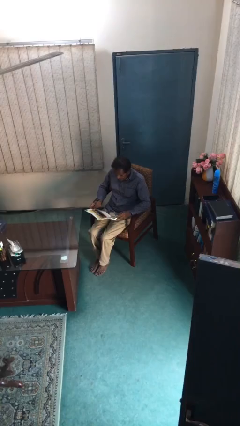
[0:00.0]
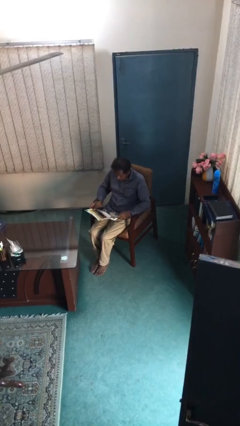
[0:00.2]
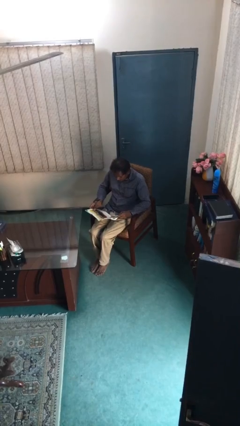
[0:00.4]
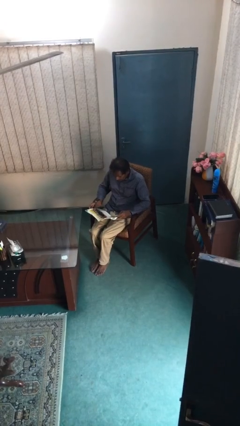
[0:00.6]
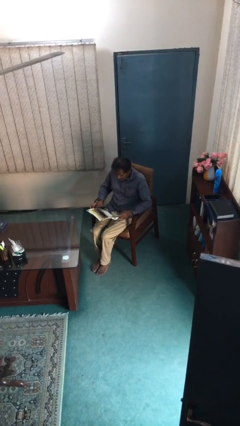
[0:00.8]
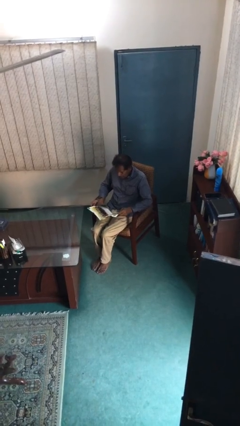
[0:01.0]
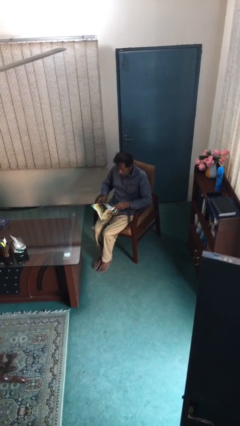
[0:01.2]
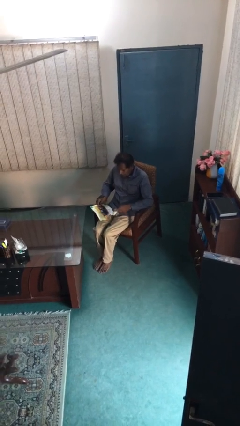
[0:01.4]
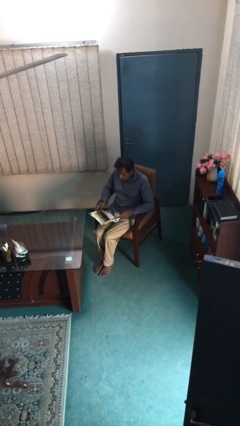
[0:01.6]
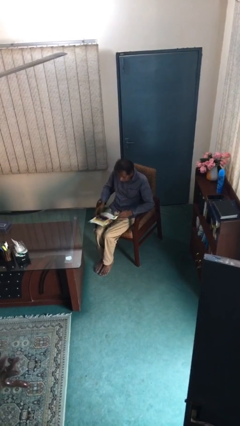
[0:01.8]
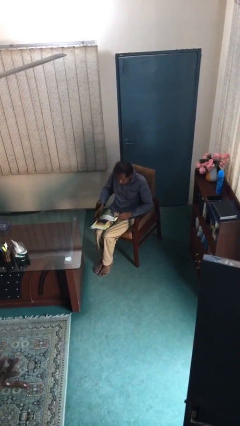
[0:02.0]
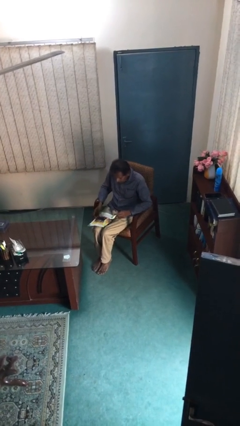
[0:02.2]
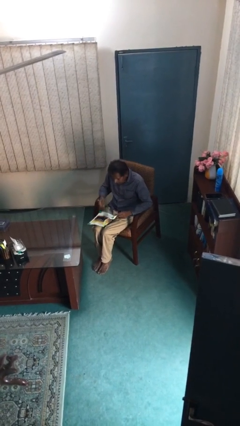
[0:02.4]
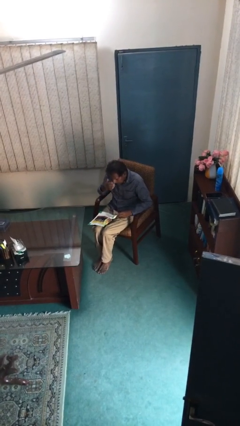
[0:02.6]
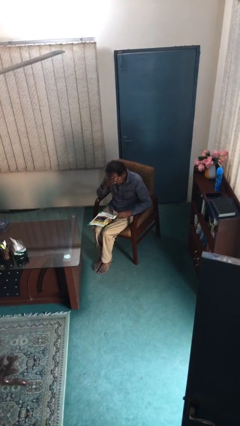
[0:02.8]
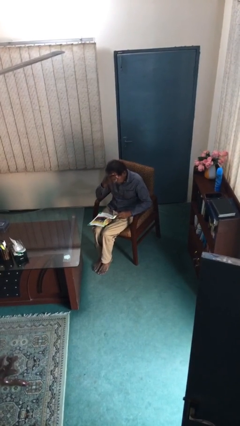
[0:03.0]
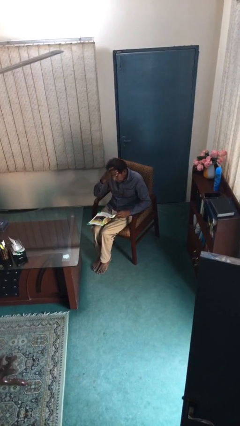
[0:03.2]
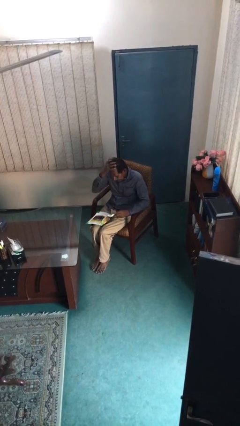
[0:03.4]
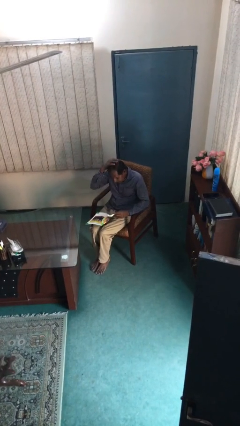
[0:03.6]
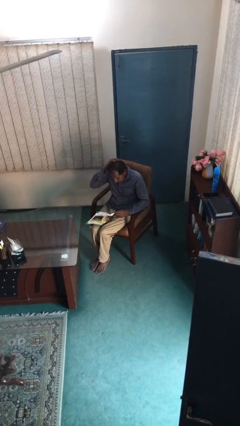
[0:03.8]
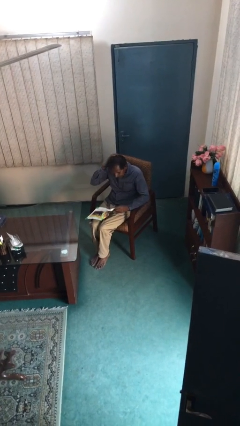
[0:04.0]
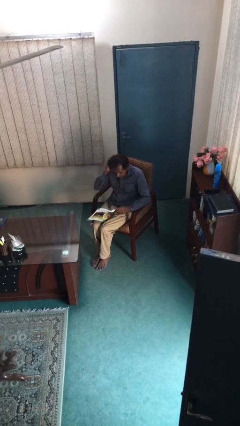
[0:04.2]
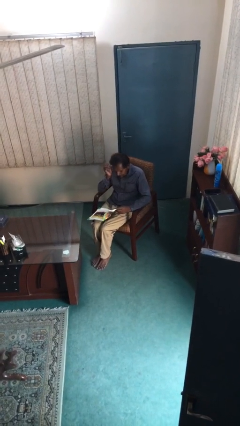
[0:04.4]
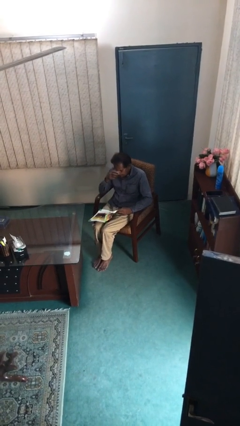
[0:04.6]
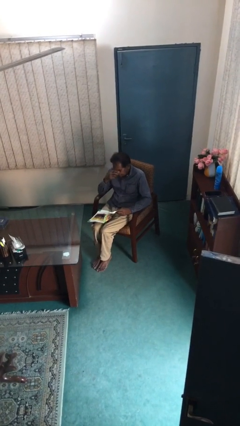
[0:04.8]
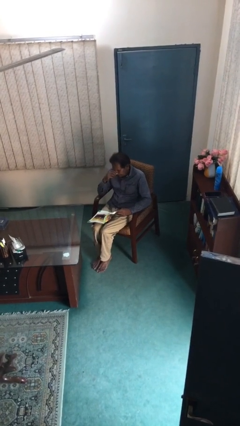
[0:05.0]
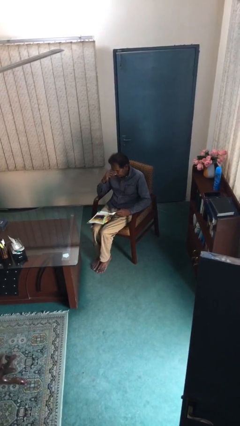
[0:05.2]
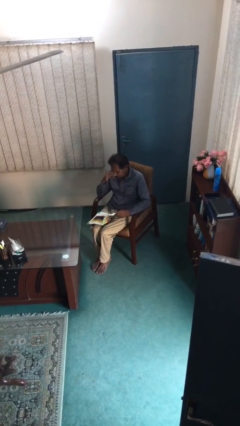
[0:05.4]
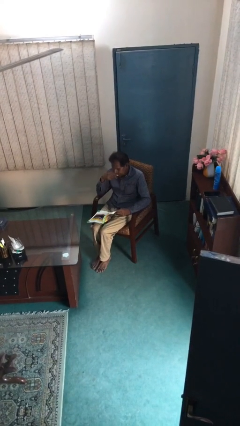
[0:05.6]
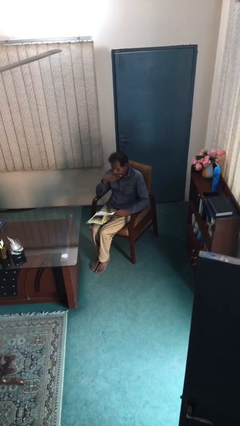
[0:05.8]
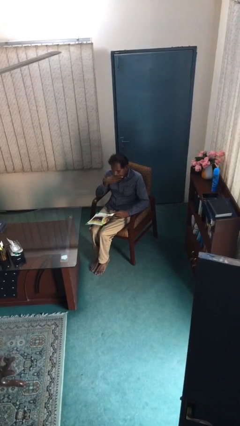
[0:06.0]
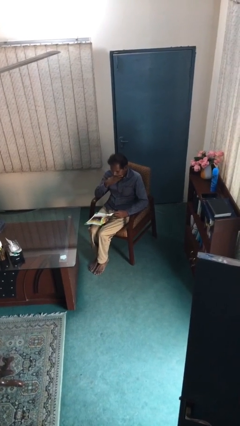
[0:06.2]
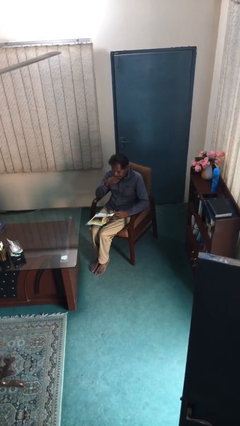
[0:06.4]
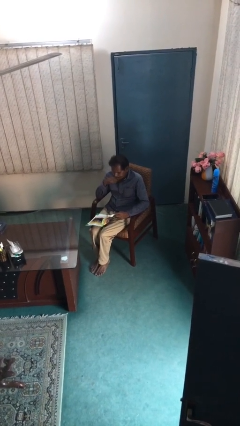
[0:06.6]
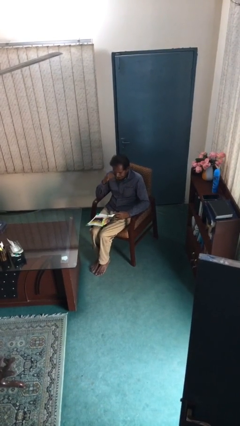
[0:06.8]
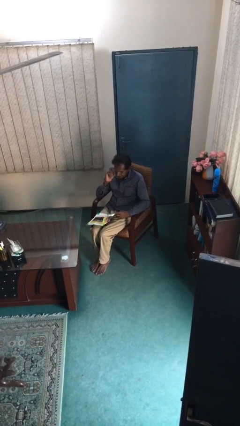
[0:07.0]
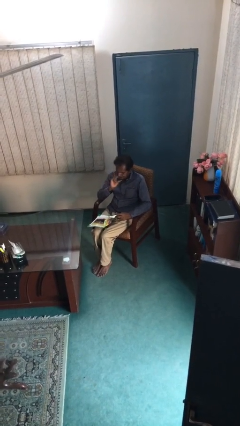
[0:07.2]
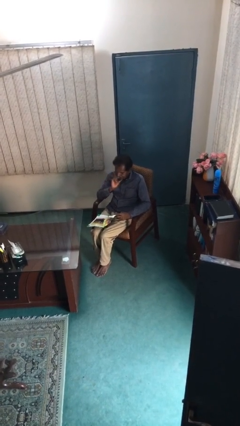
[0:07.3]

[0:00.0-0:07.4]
person reads document

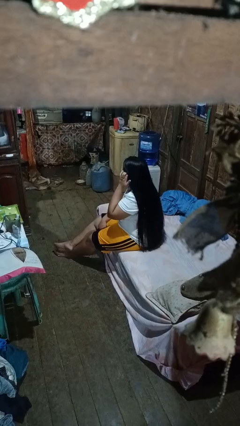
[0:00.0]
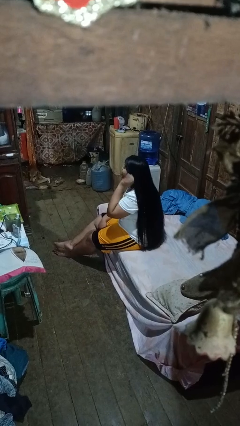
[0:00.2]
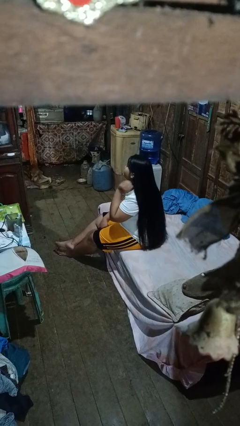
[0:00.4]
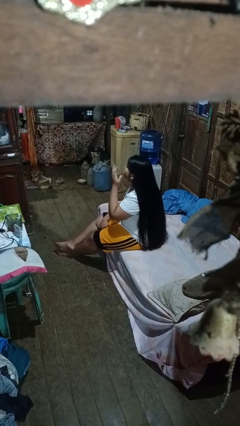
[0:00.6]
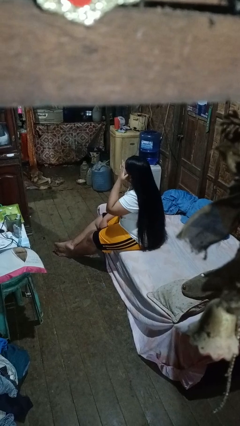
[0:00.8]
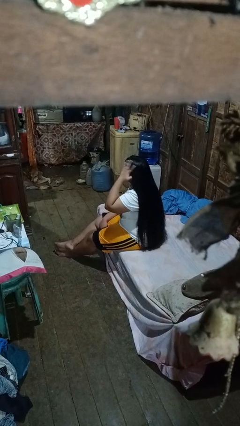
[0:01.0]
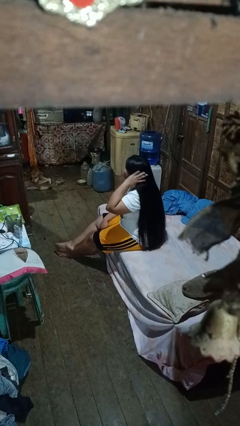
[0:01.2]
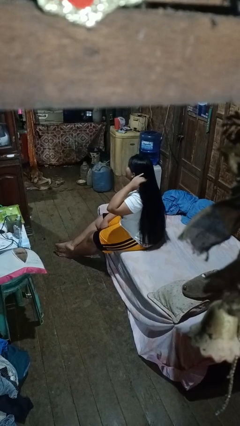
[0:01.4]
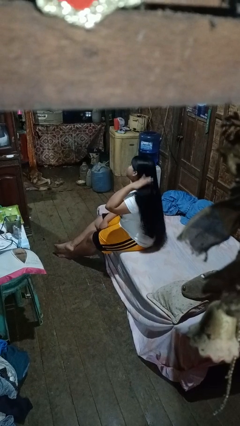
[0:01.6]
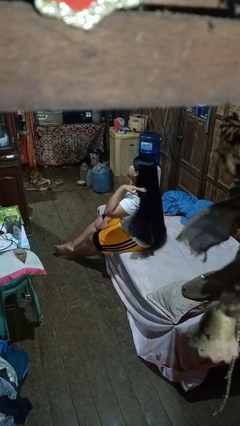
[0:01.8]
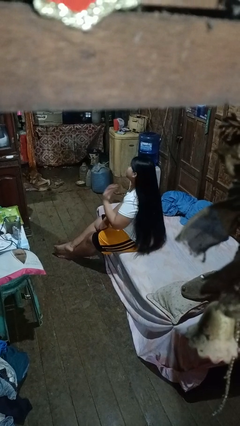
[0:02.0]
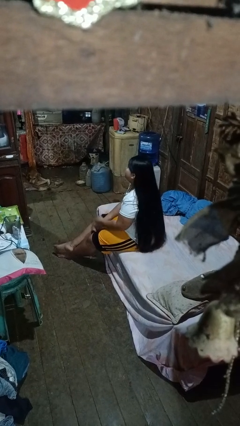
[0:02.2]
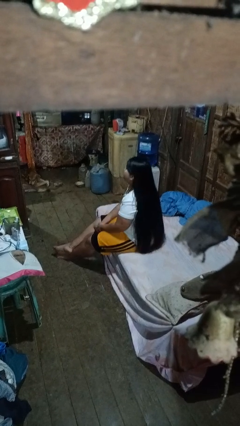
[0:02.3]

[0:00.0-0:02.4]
person strokes hair

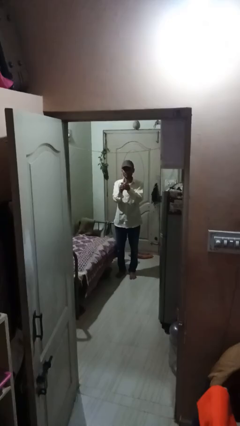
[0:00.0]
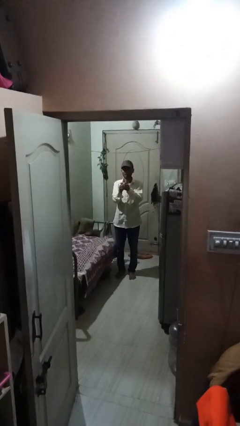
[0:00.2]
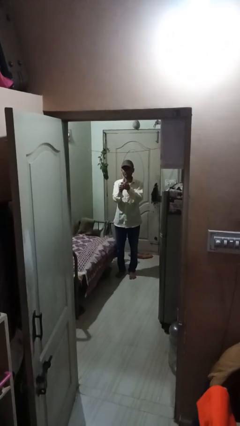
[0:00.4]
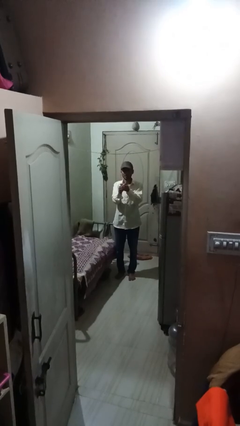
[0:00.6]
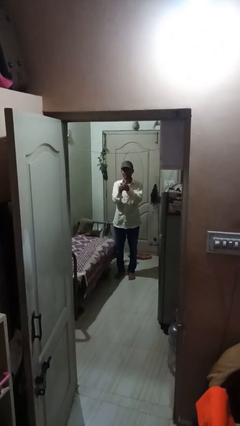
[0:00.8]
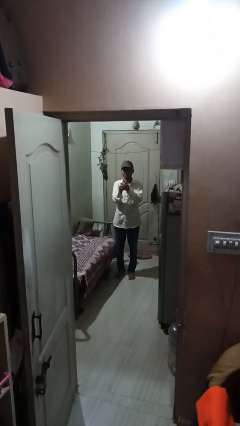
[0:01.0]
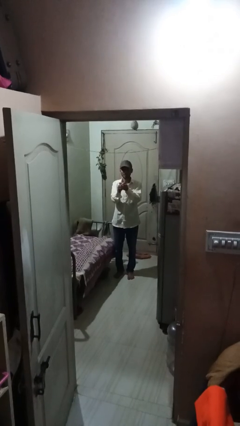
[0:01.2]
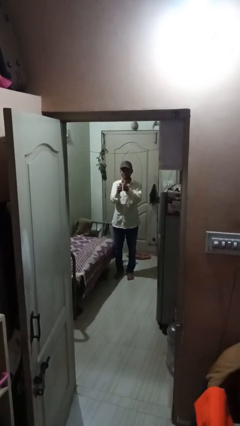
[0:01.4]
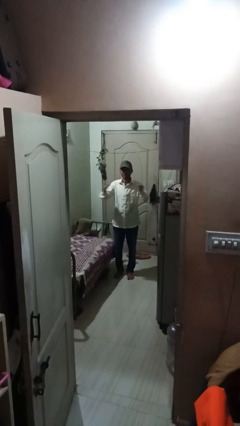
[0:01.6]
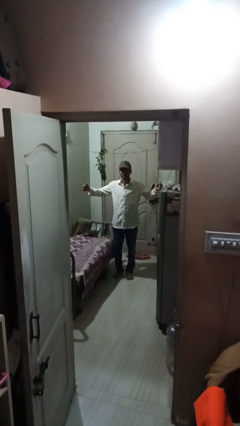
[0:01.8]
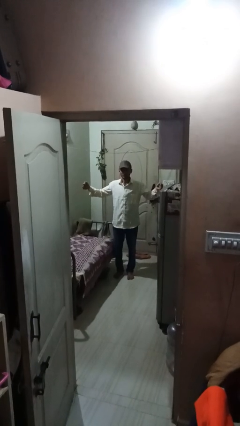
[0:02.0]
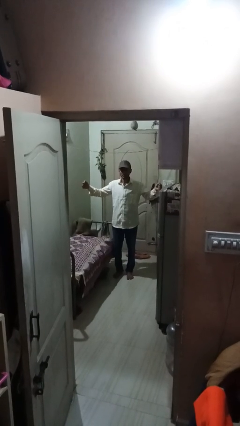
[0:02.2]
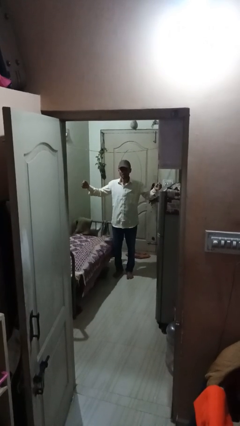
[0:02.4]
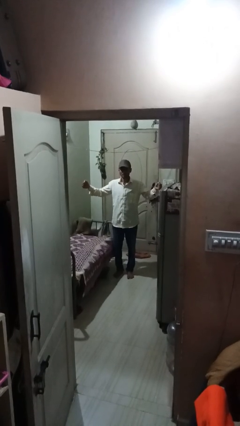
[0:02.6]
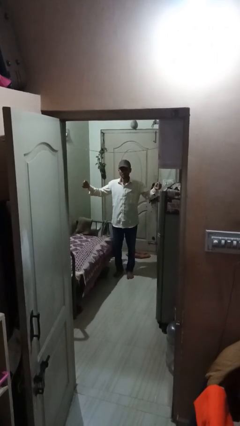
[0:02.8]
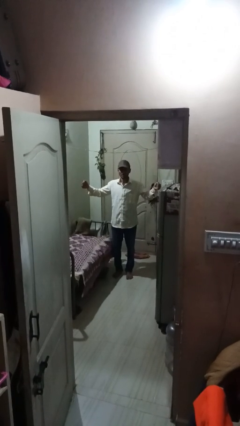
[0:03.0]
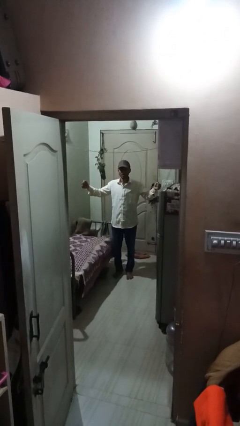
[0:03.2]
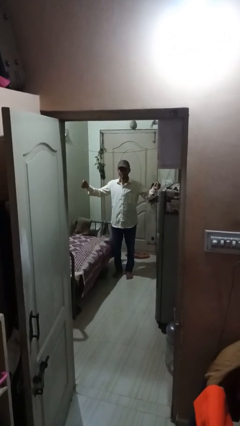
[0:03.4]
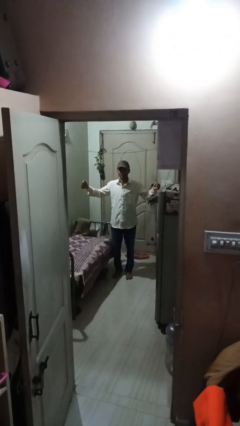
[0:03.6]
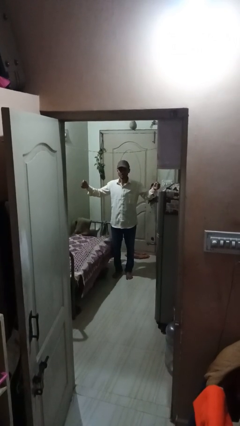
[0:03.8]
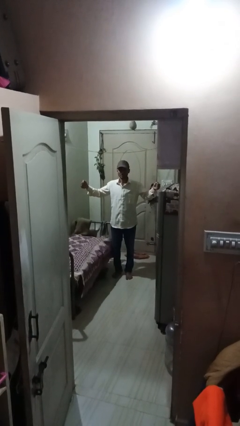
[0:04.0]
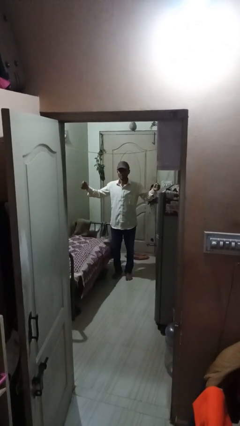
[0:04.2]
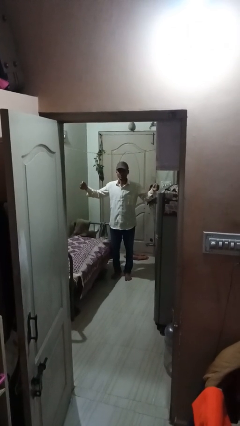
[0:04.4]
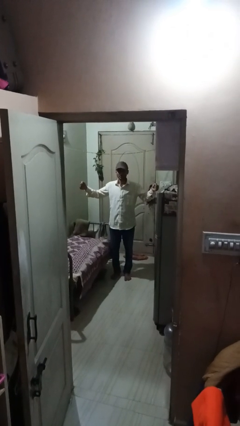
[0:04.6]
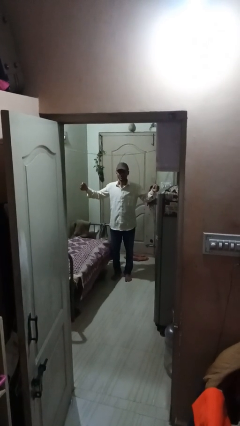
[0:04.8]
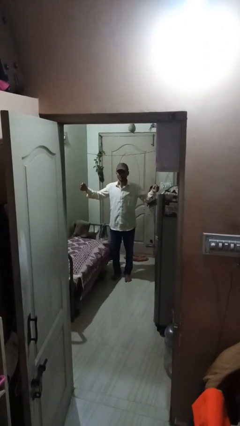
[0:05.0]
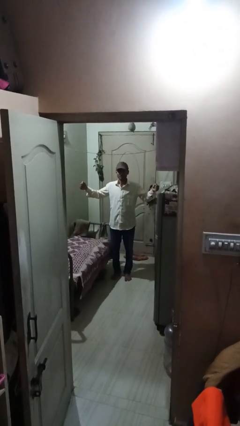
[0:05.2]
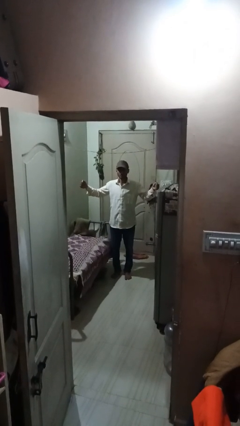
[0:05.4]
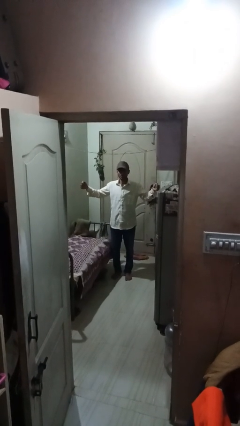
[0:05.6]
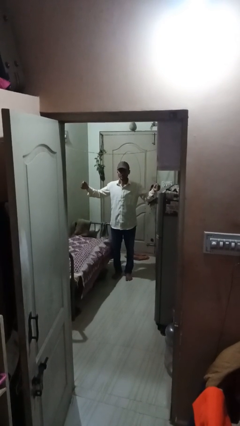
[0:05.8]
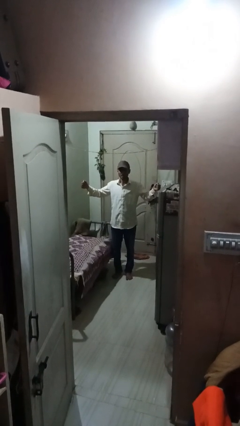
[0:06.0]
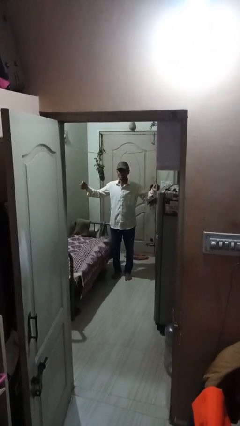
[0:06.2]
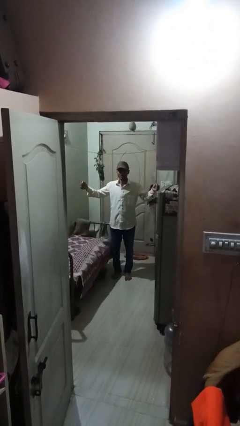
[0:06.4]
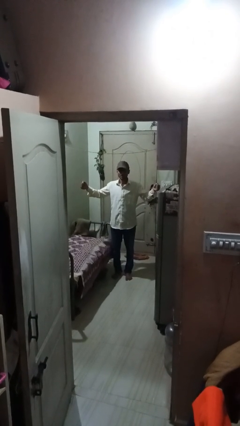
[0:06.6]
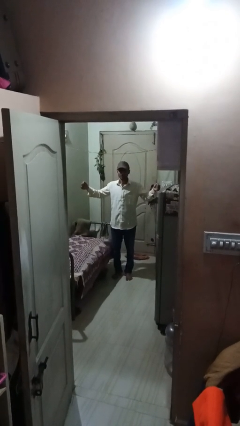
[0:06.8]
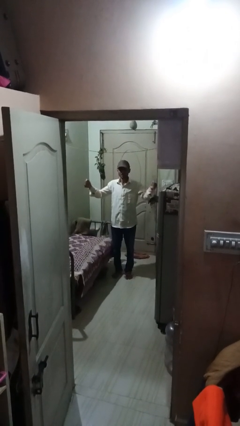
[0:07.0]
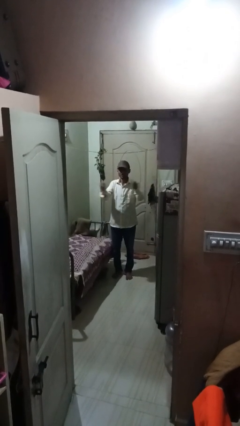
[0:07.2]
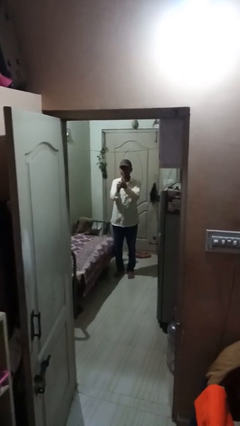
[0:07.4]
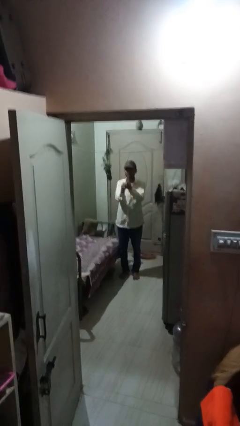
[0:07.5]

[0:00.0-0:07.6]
person gestures zoom out
